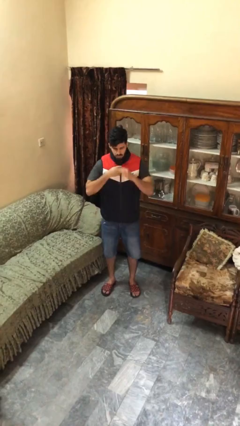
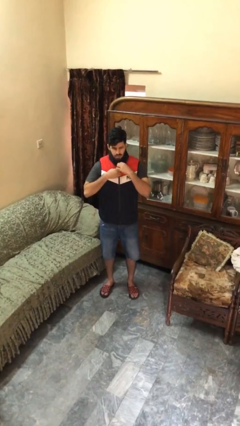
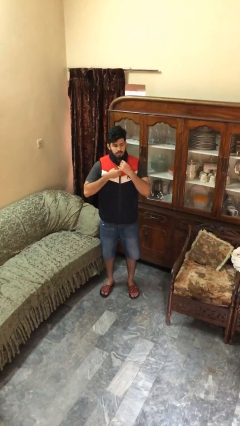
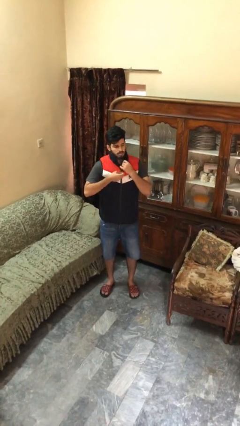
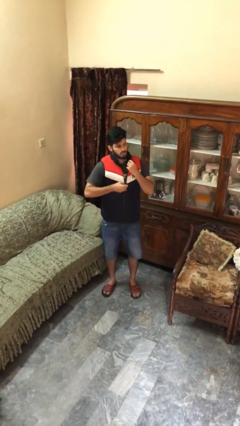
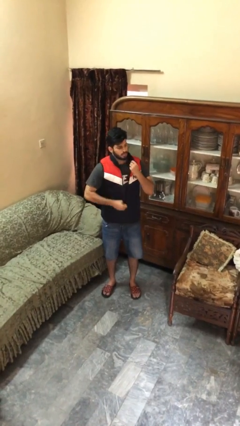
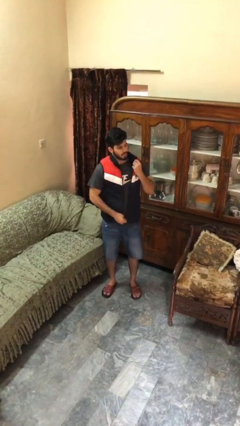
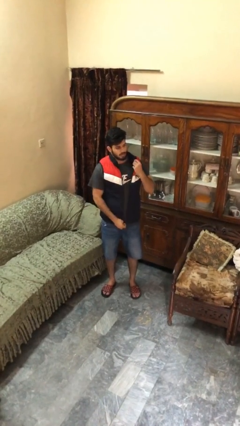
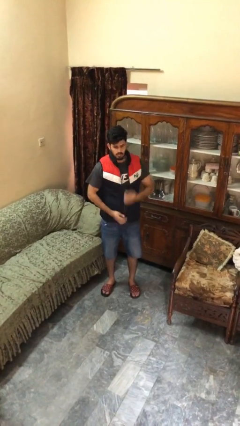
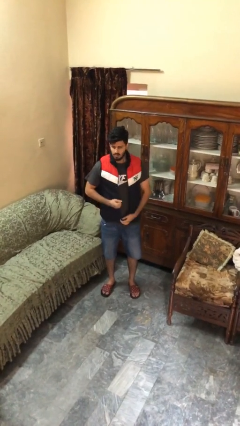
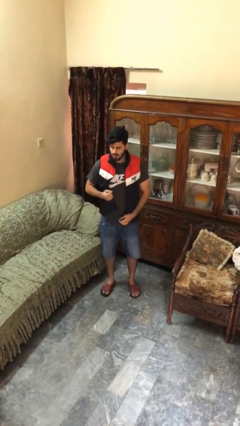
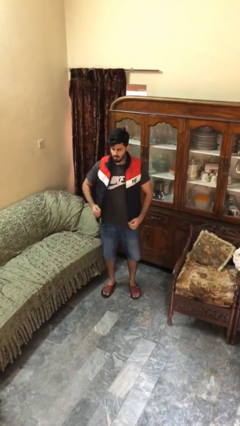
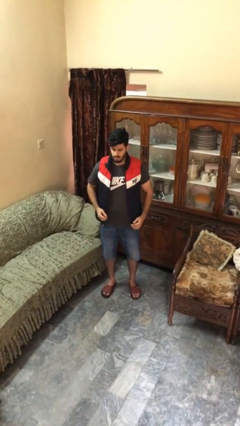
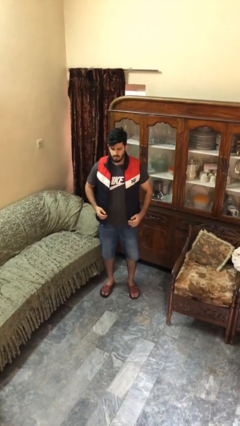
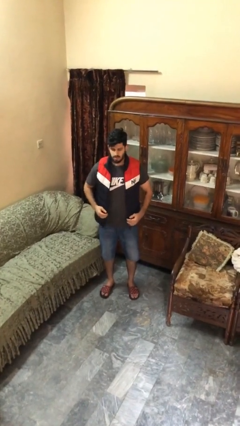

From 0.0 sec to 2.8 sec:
person unzips jacket

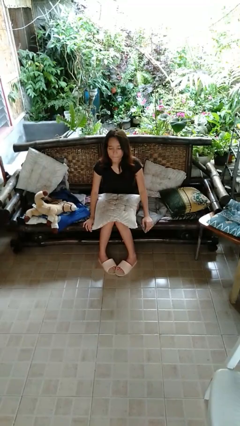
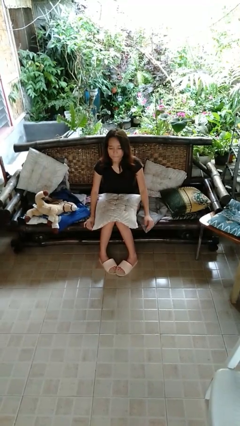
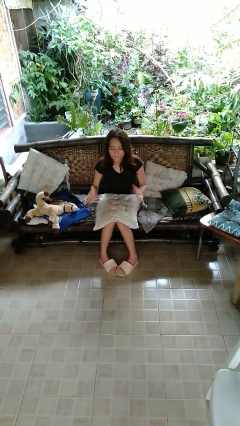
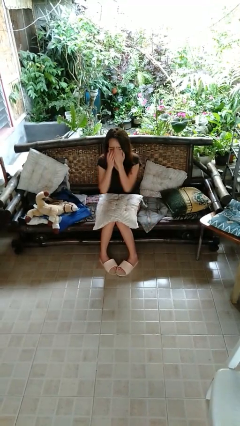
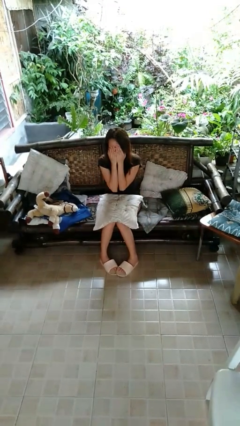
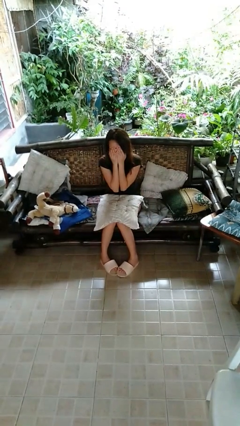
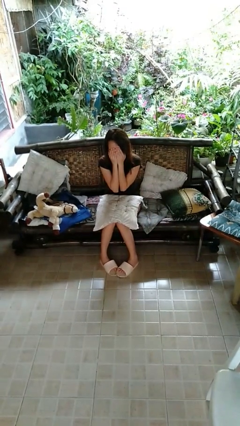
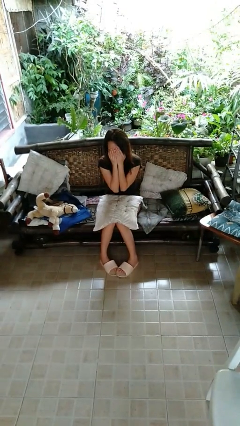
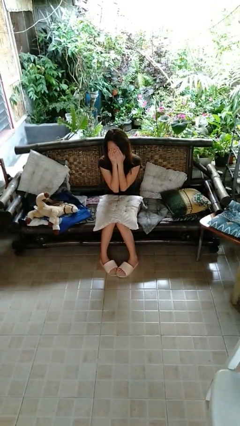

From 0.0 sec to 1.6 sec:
person covers face with hands

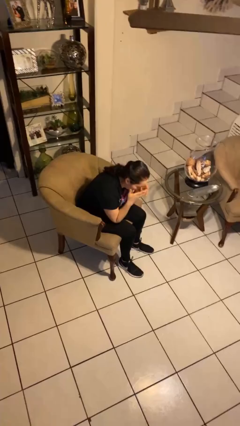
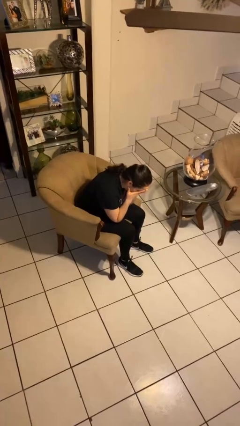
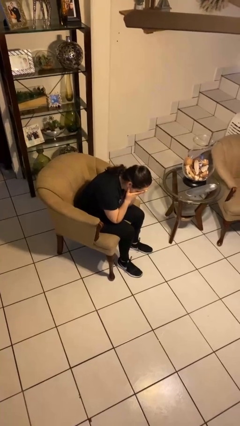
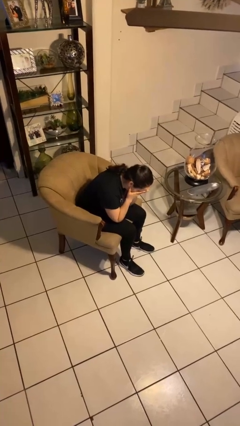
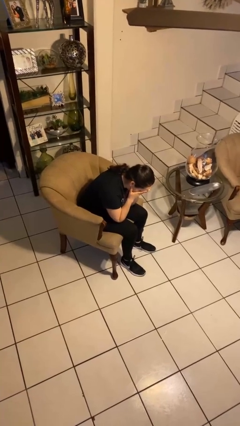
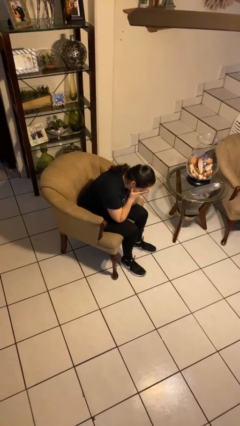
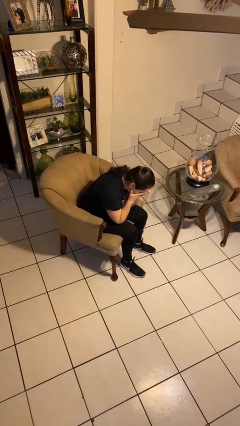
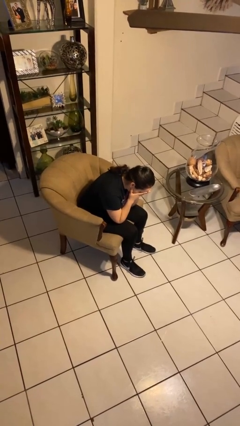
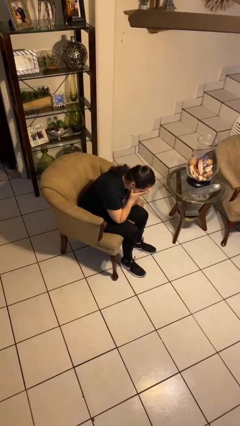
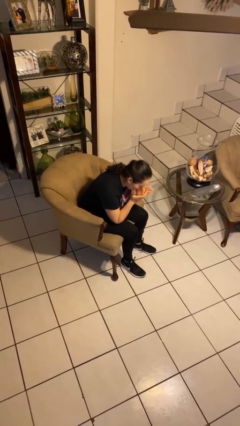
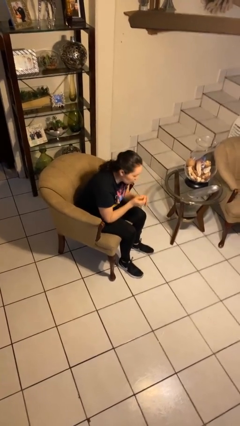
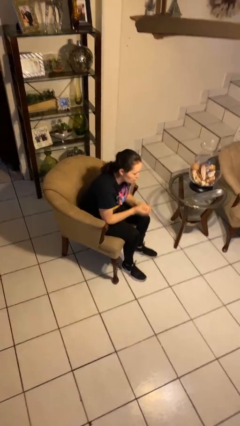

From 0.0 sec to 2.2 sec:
person prays

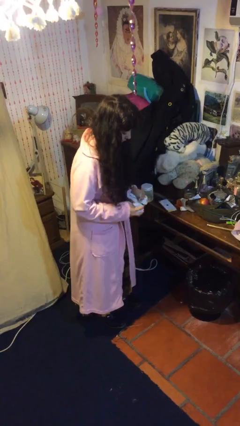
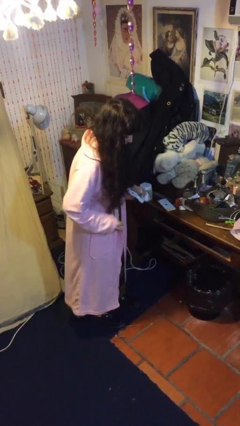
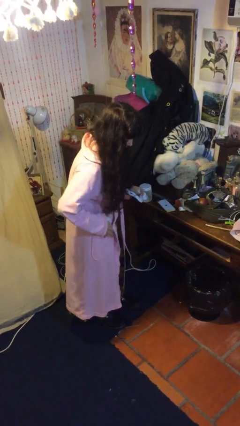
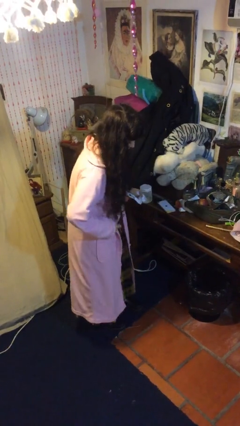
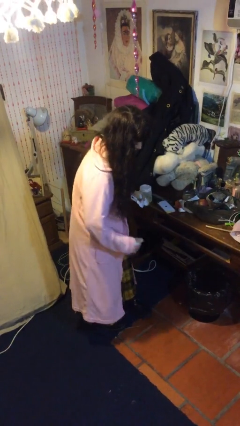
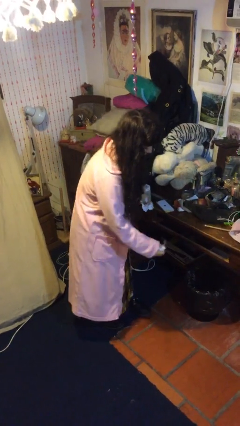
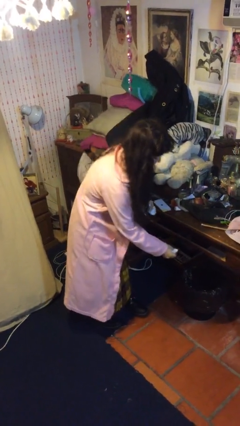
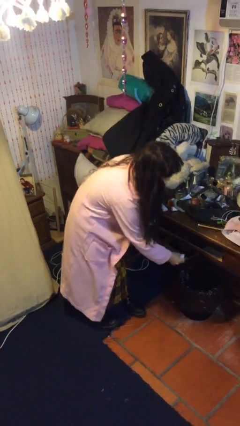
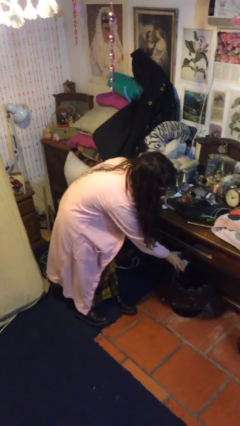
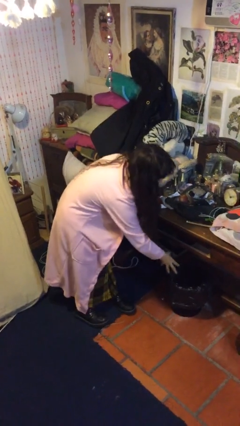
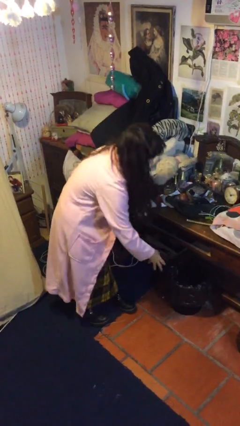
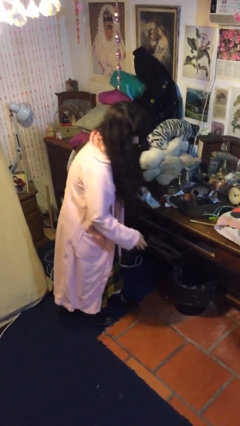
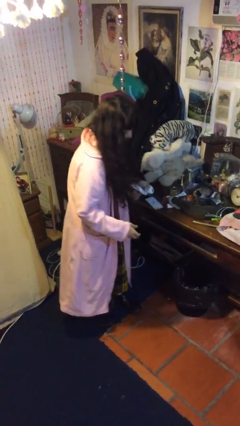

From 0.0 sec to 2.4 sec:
person discards trash

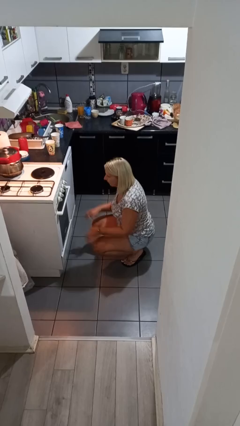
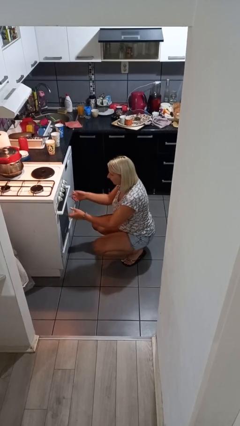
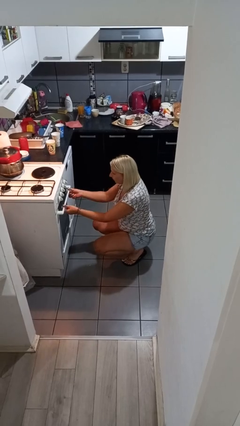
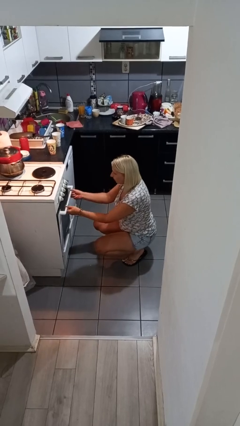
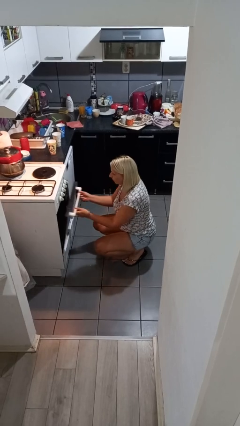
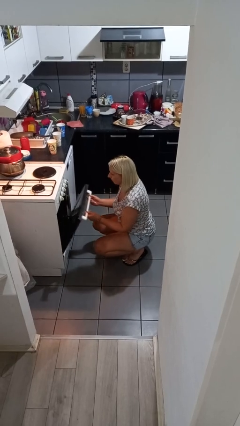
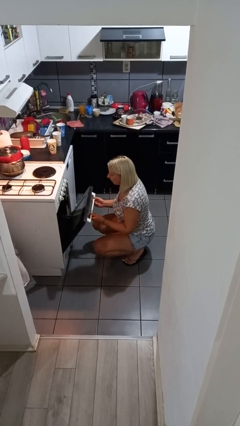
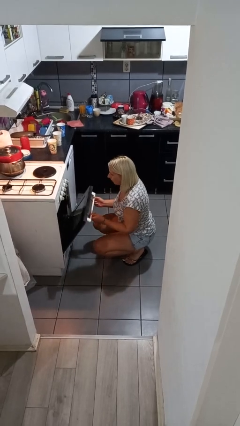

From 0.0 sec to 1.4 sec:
person opens oven door

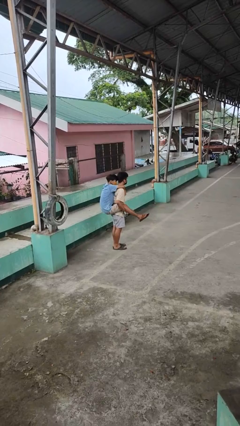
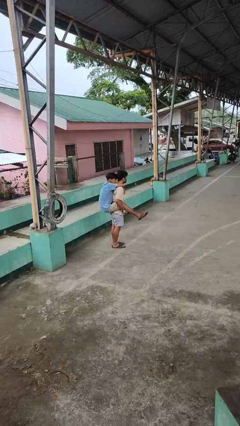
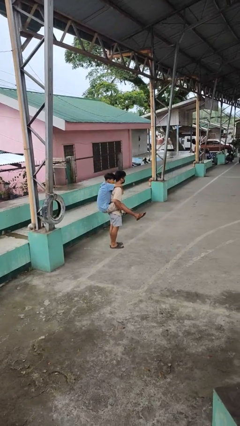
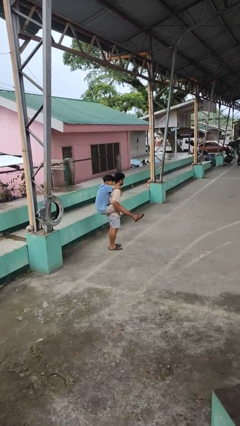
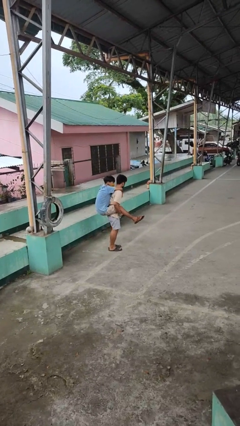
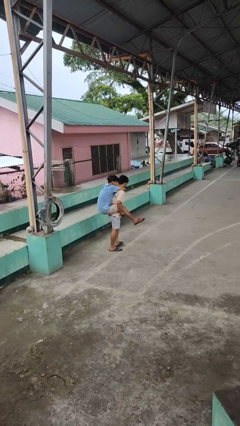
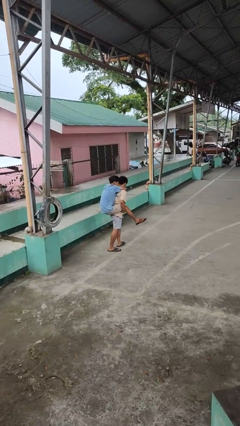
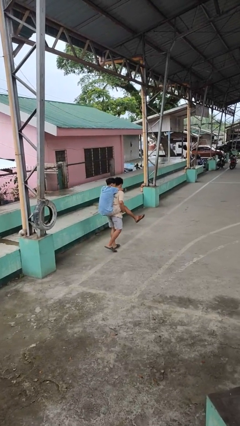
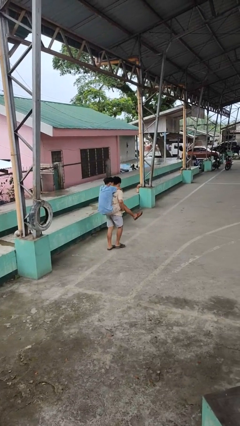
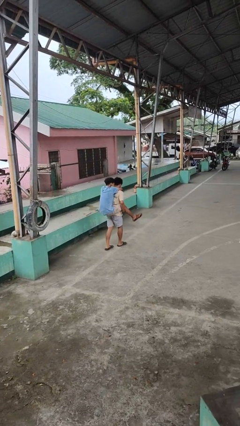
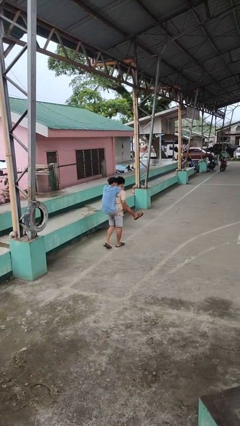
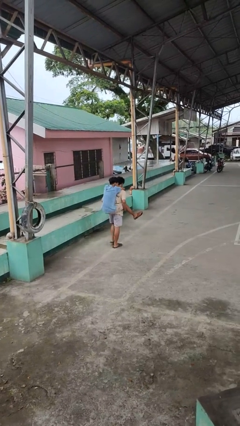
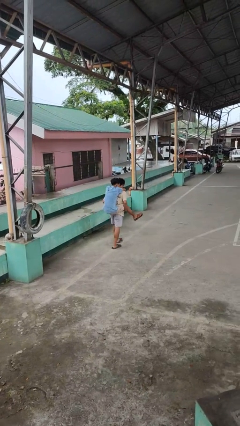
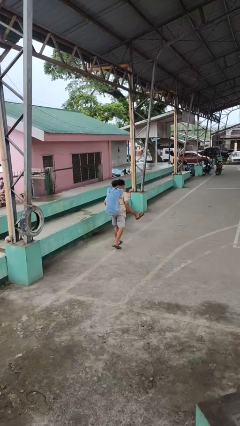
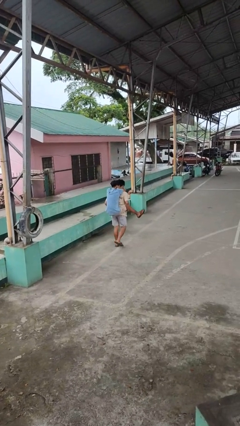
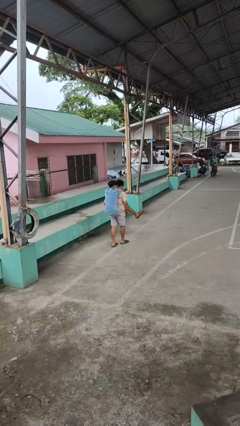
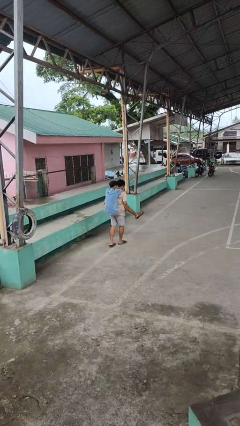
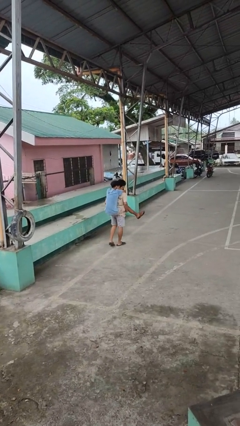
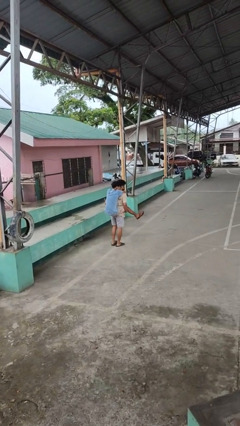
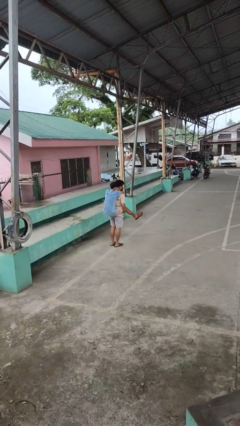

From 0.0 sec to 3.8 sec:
person carries person on back

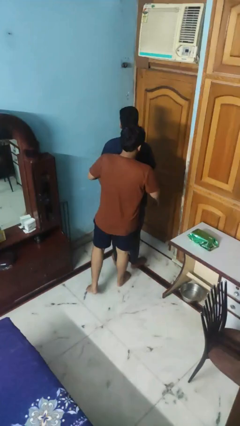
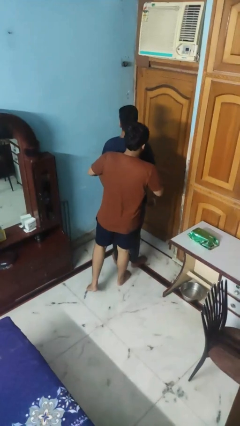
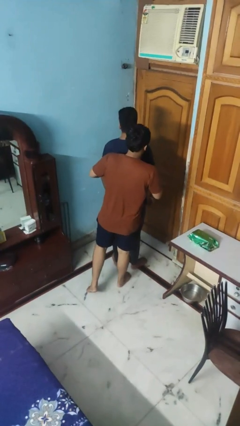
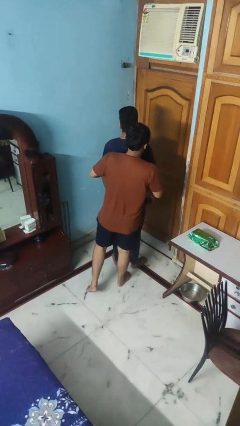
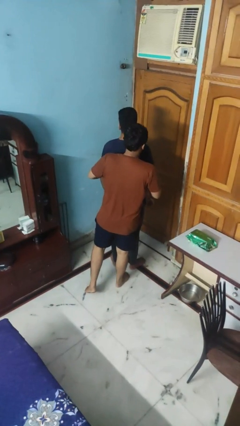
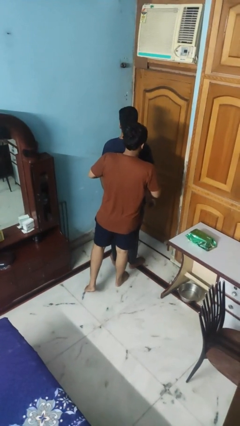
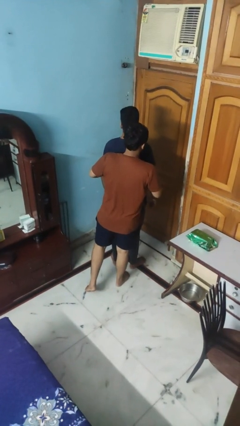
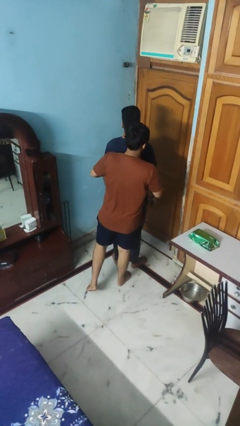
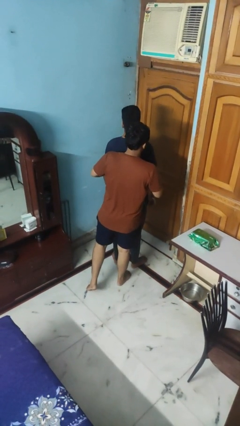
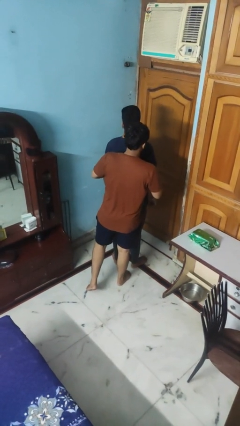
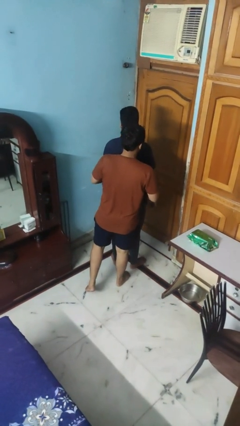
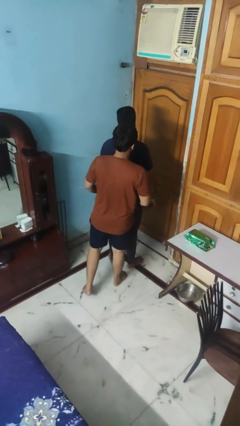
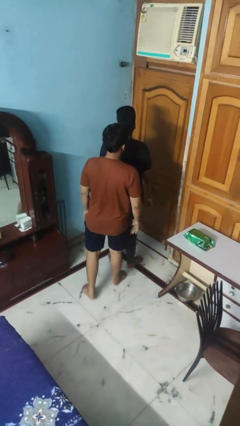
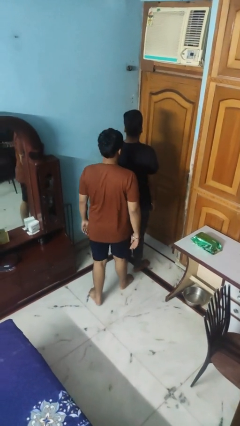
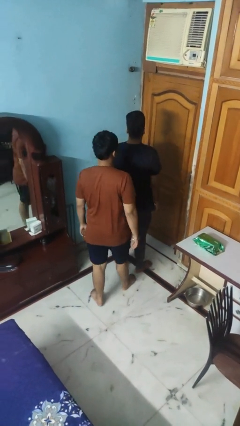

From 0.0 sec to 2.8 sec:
person hugs person from behind
